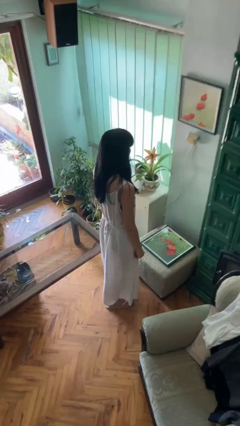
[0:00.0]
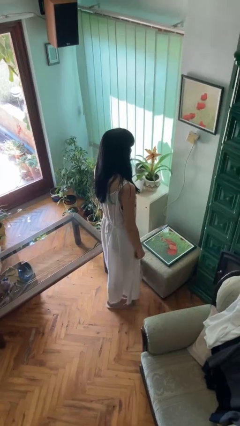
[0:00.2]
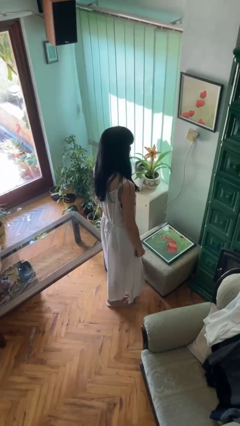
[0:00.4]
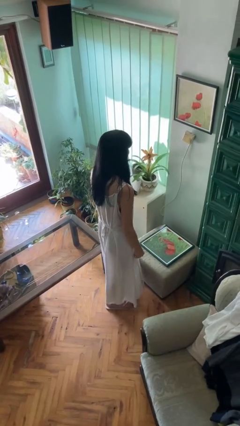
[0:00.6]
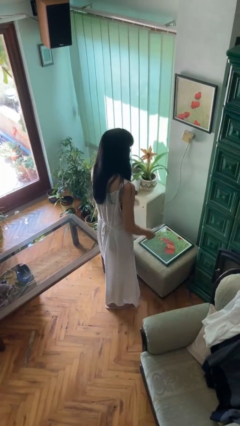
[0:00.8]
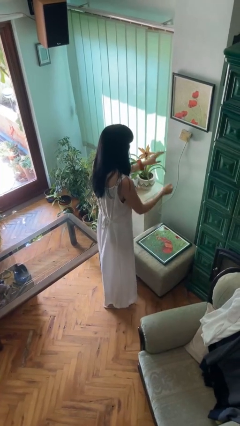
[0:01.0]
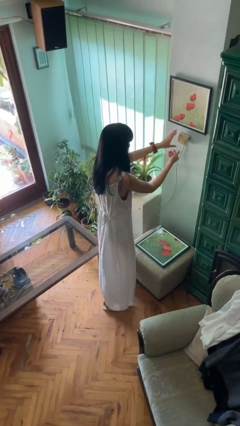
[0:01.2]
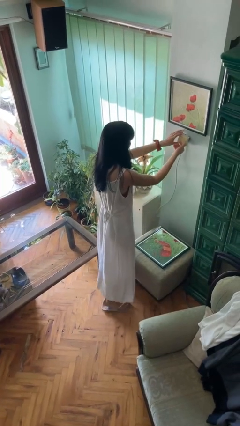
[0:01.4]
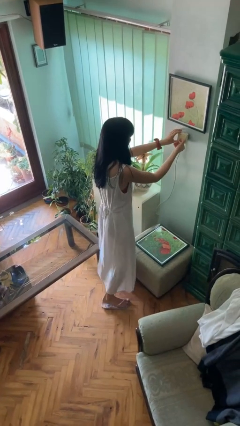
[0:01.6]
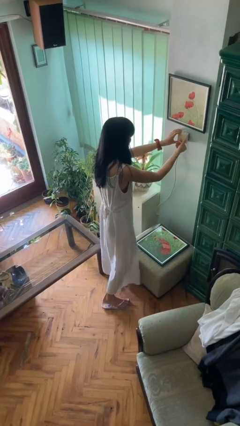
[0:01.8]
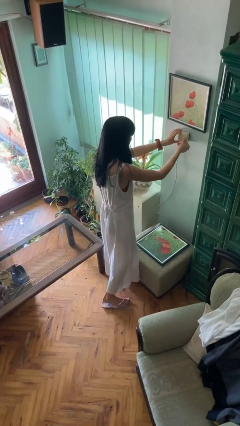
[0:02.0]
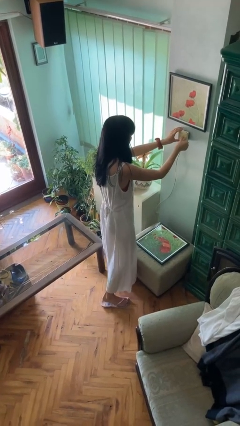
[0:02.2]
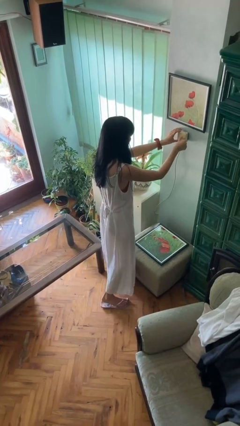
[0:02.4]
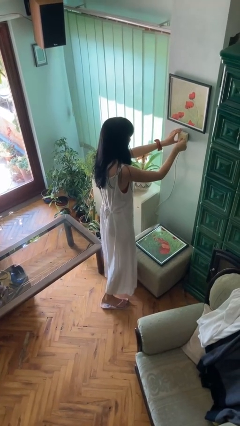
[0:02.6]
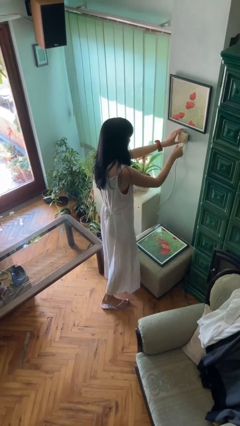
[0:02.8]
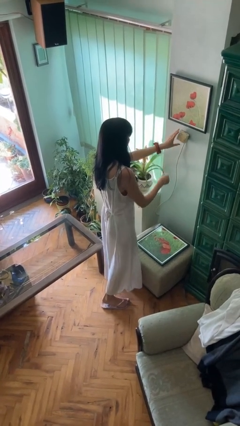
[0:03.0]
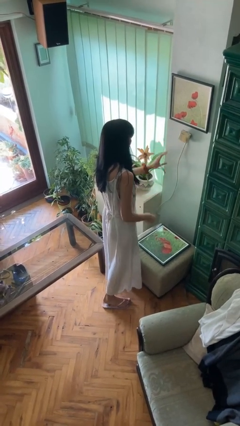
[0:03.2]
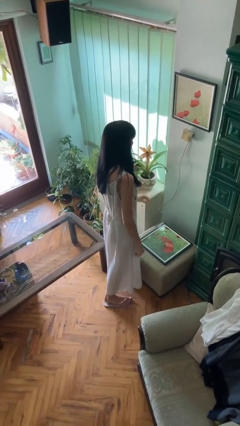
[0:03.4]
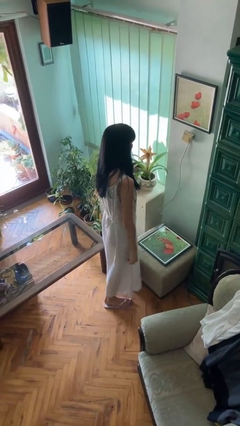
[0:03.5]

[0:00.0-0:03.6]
person adjusts thermostat

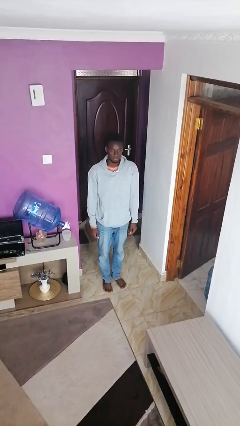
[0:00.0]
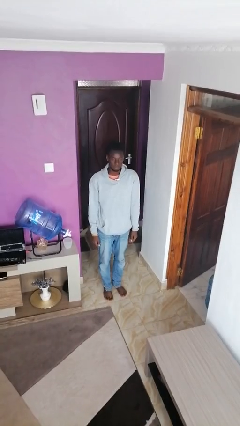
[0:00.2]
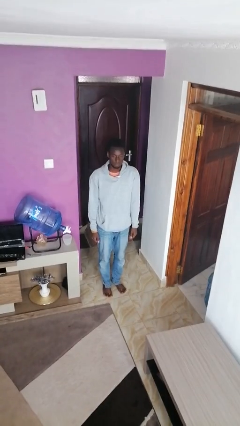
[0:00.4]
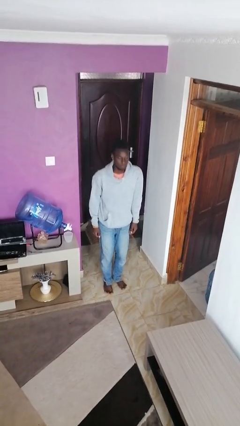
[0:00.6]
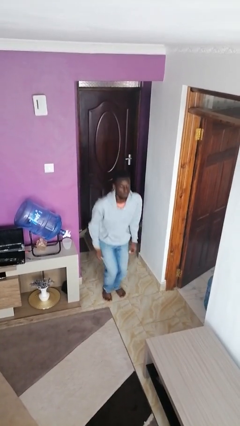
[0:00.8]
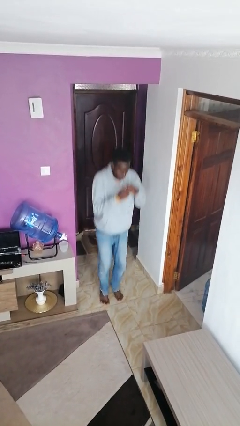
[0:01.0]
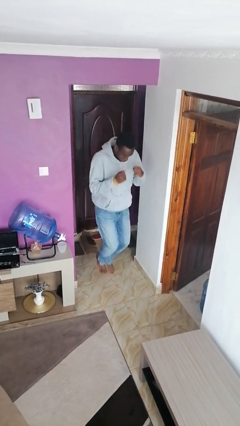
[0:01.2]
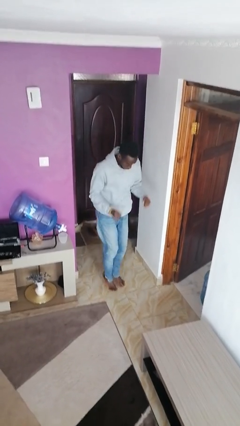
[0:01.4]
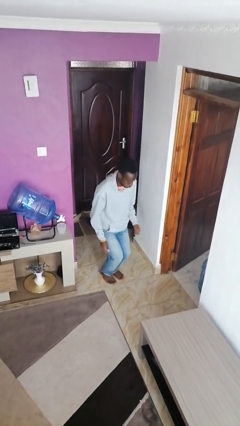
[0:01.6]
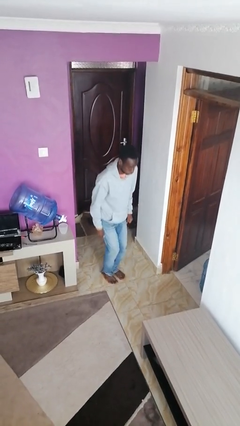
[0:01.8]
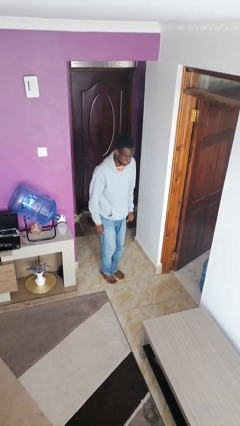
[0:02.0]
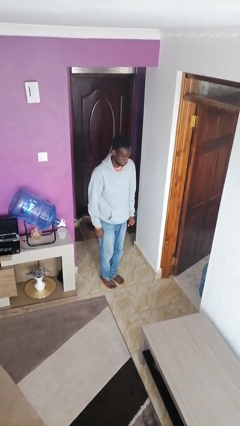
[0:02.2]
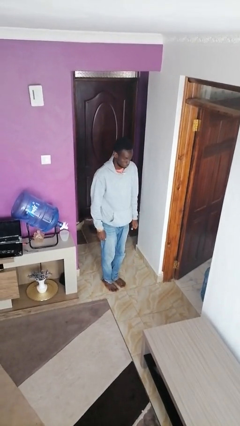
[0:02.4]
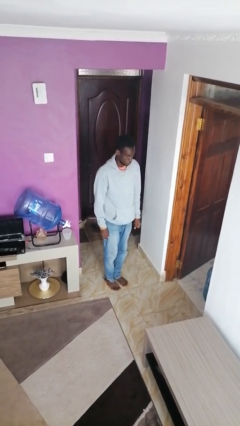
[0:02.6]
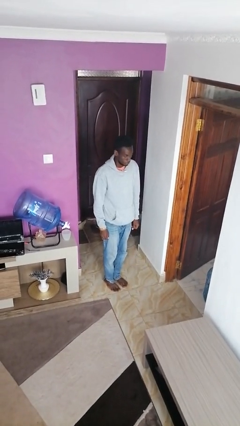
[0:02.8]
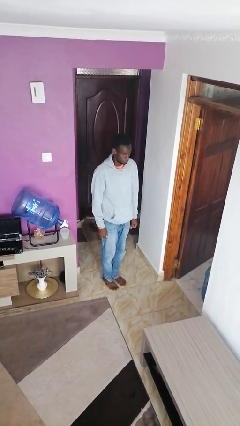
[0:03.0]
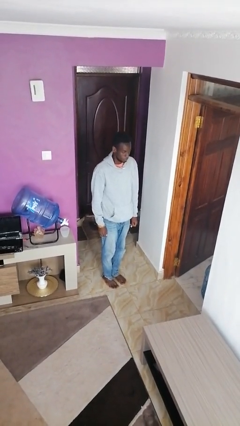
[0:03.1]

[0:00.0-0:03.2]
person jumps

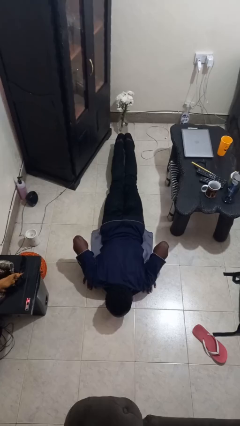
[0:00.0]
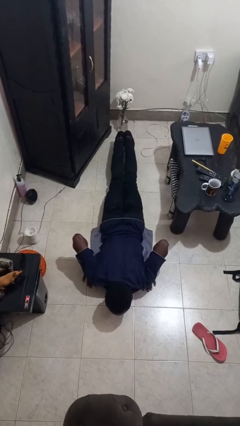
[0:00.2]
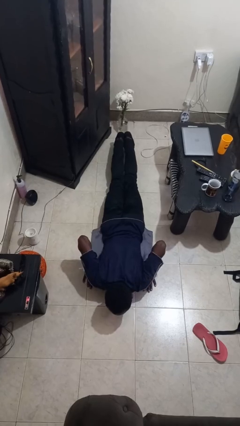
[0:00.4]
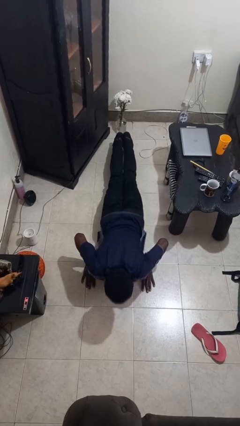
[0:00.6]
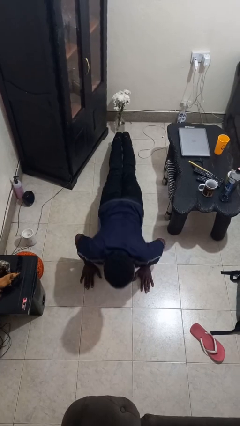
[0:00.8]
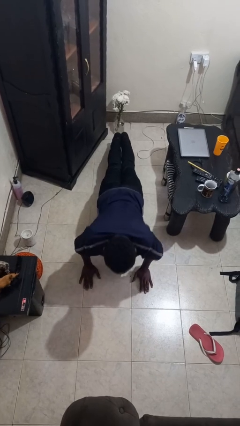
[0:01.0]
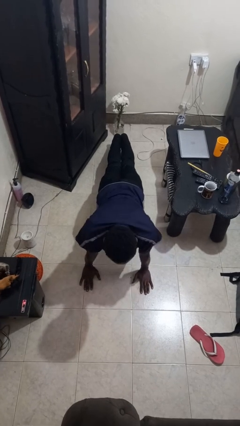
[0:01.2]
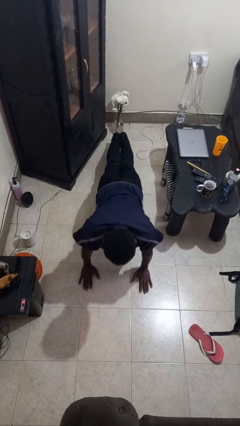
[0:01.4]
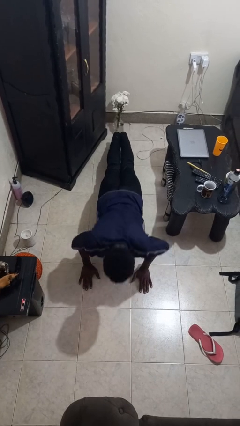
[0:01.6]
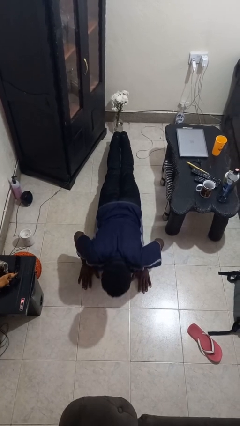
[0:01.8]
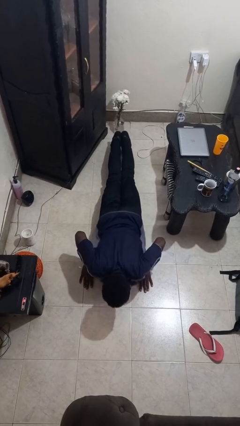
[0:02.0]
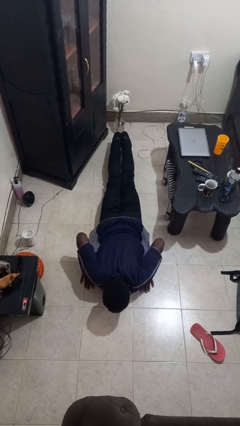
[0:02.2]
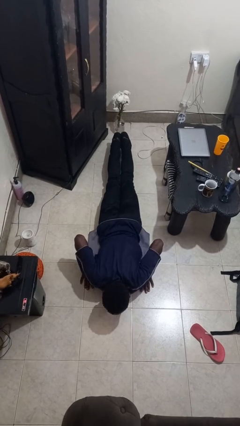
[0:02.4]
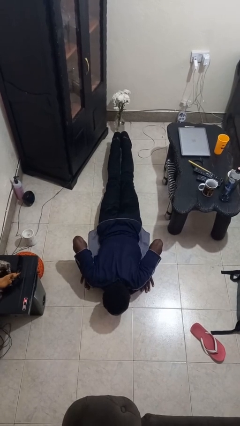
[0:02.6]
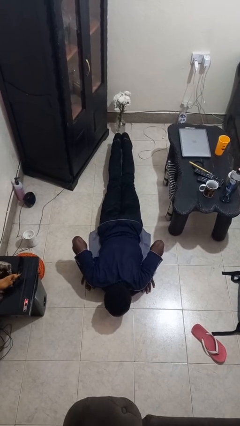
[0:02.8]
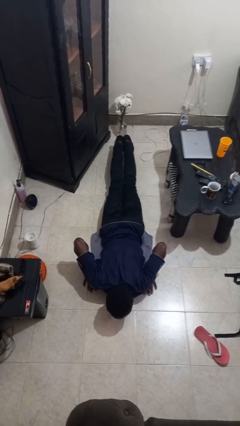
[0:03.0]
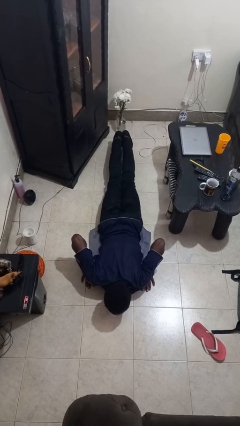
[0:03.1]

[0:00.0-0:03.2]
person exercises with pushup

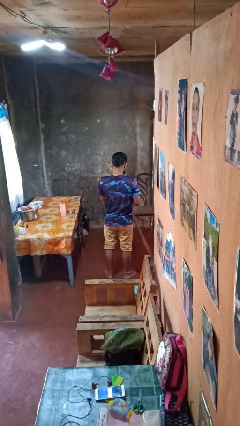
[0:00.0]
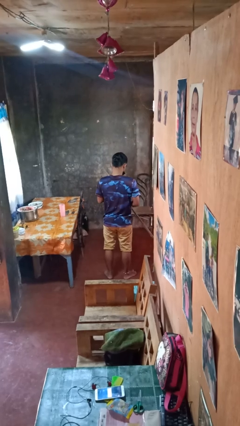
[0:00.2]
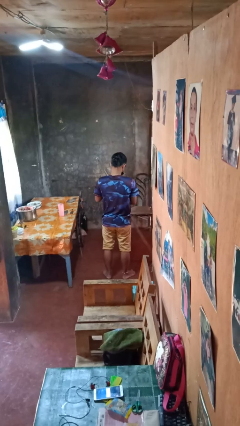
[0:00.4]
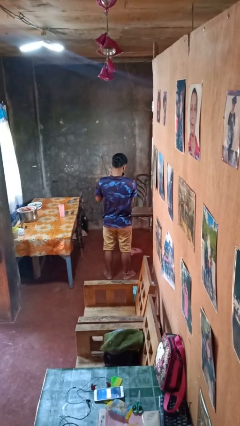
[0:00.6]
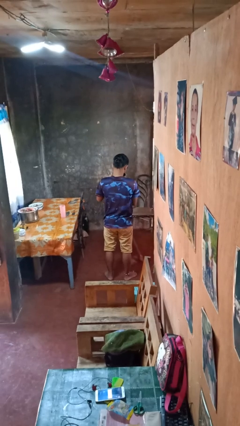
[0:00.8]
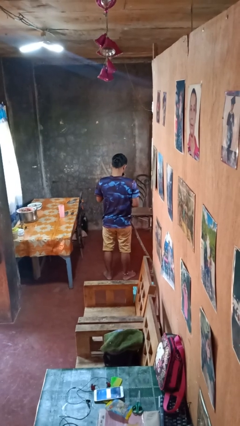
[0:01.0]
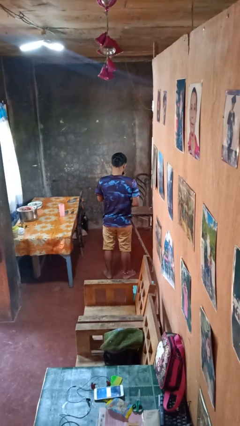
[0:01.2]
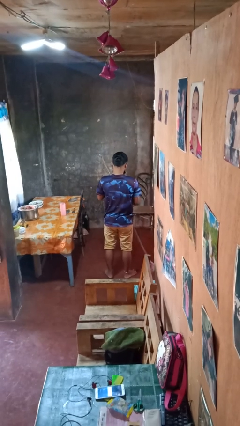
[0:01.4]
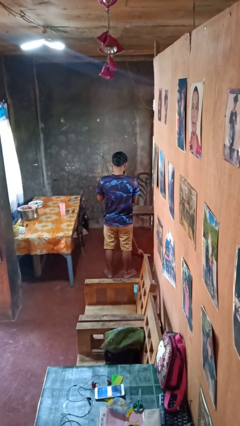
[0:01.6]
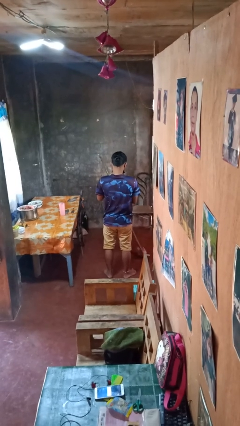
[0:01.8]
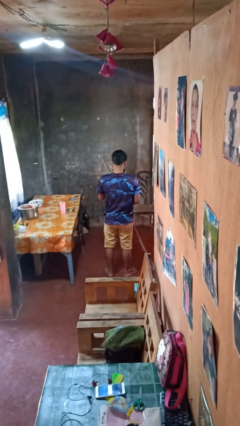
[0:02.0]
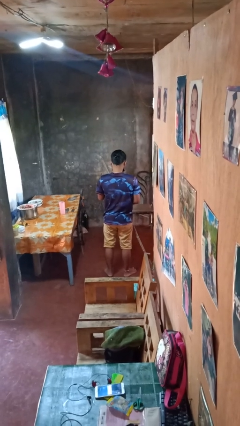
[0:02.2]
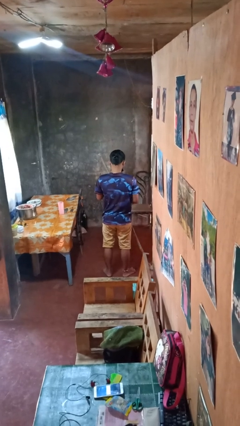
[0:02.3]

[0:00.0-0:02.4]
person mops

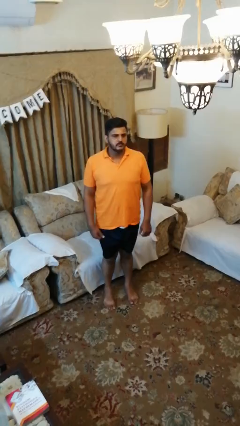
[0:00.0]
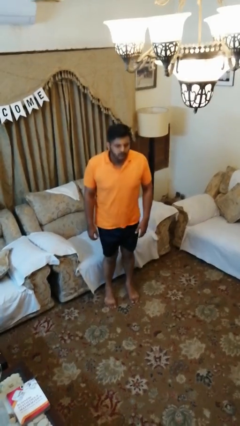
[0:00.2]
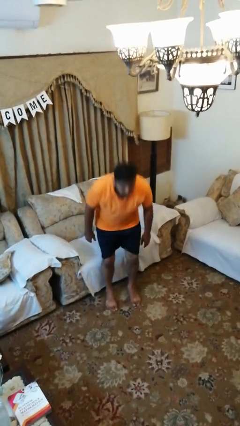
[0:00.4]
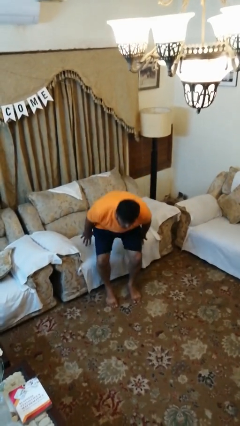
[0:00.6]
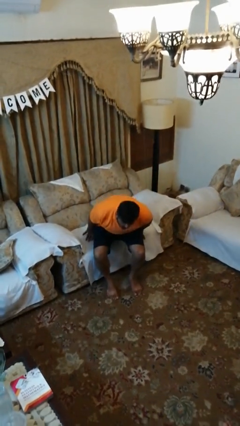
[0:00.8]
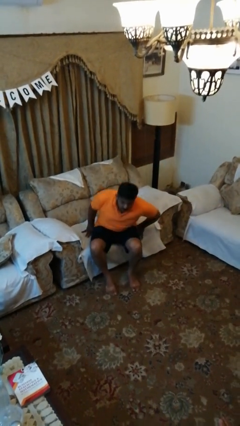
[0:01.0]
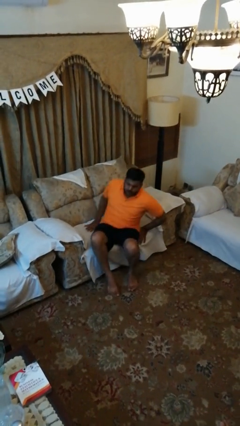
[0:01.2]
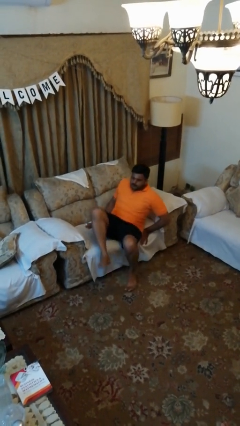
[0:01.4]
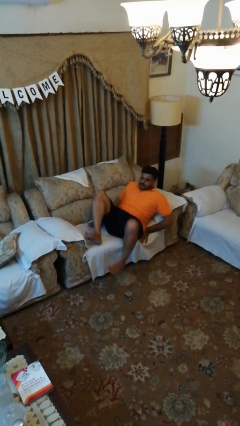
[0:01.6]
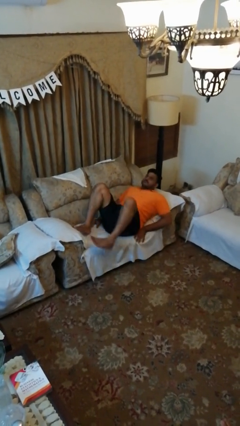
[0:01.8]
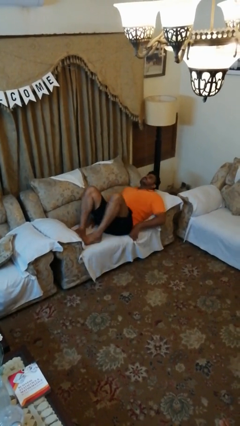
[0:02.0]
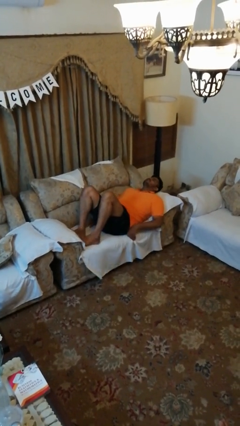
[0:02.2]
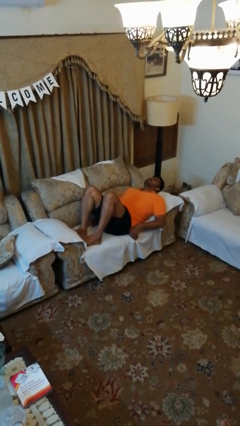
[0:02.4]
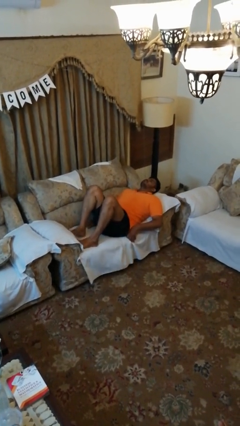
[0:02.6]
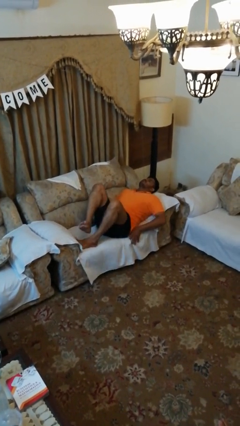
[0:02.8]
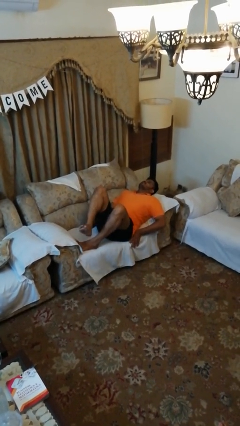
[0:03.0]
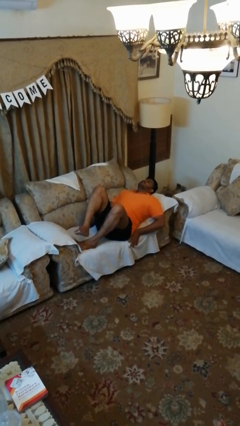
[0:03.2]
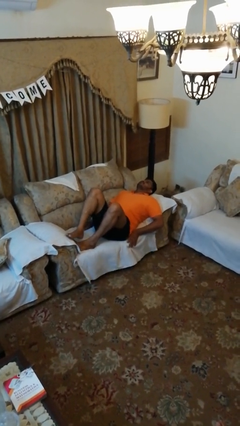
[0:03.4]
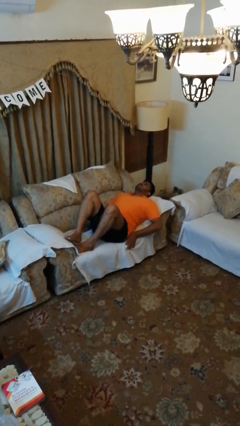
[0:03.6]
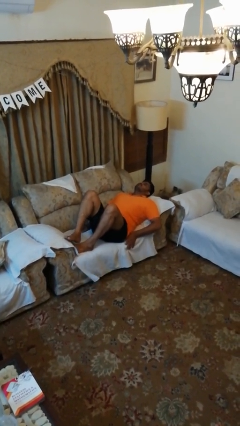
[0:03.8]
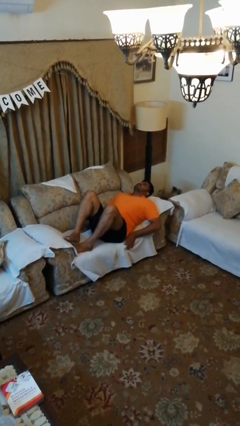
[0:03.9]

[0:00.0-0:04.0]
person lies down on couch

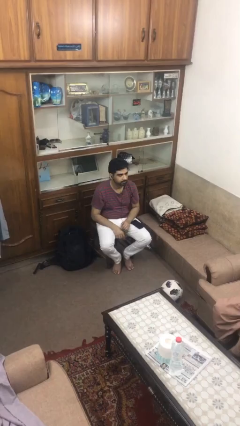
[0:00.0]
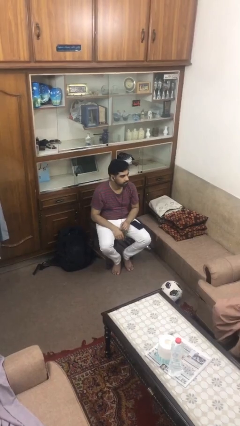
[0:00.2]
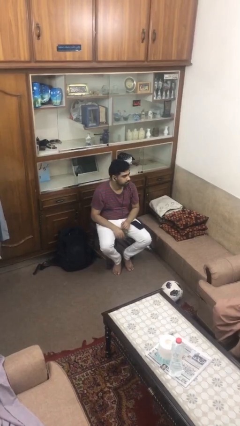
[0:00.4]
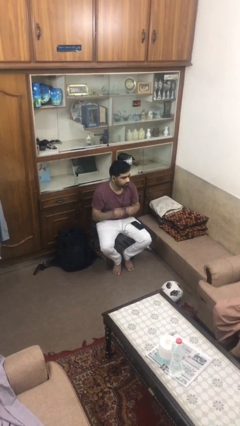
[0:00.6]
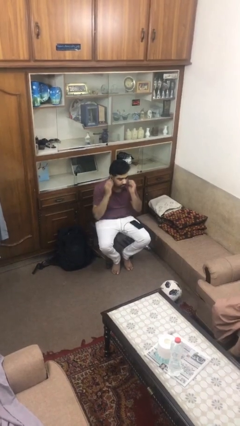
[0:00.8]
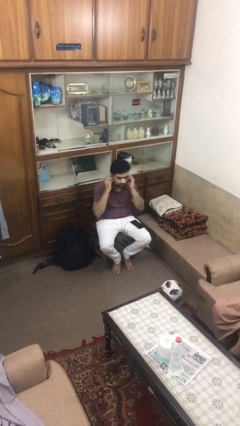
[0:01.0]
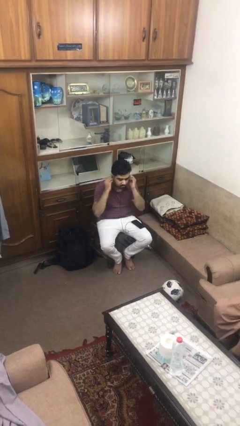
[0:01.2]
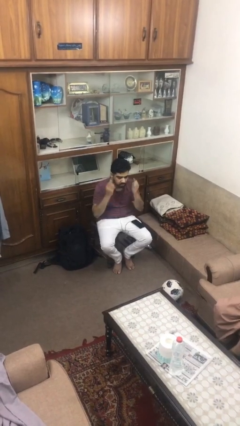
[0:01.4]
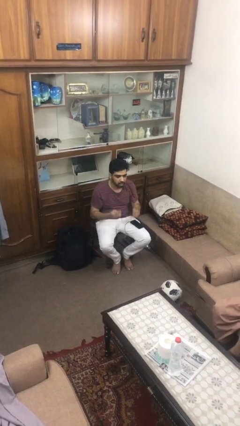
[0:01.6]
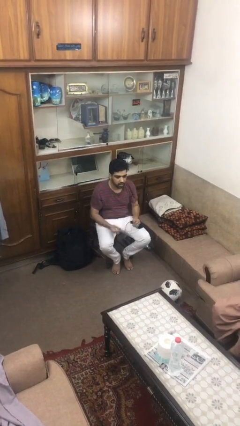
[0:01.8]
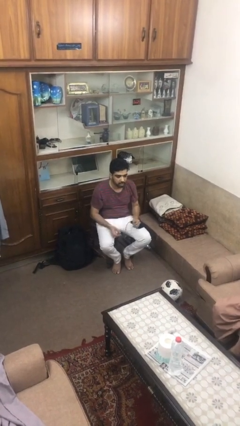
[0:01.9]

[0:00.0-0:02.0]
person takes off headphones
